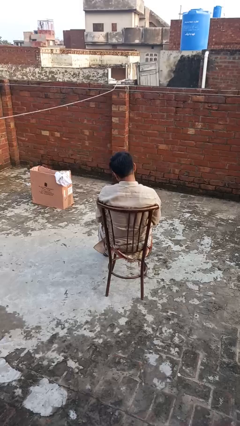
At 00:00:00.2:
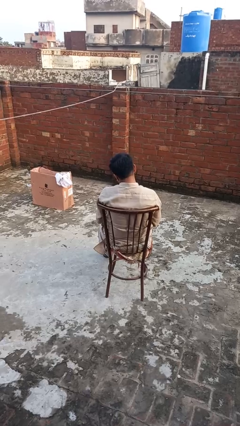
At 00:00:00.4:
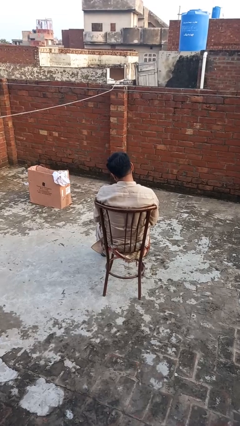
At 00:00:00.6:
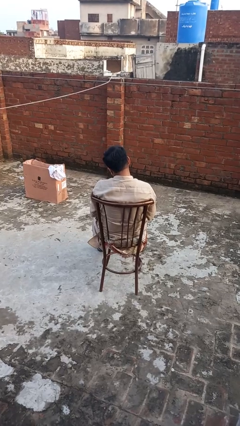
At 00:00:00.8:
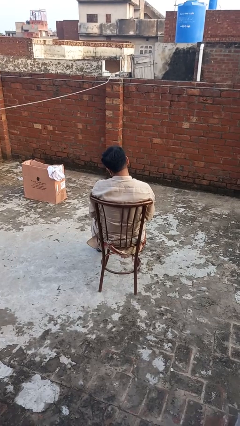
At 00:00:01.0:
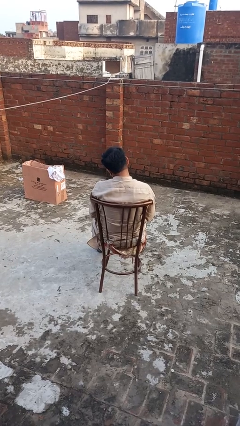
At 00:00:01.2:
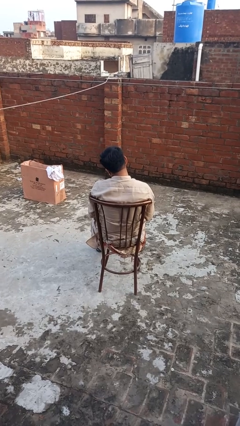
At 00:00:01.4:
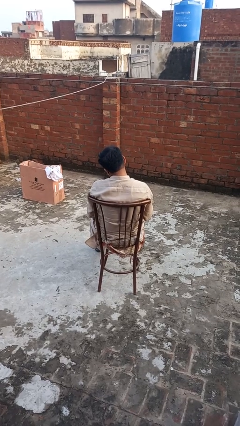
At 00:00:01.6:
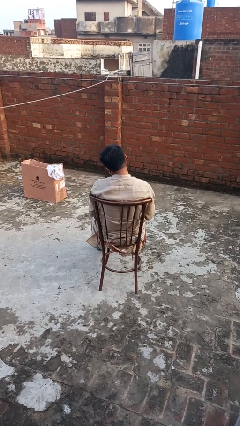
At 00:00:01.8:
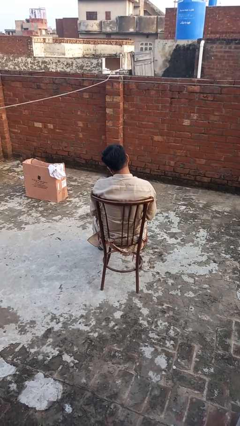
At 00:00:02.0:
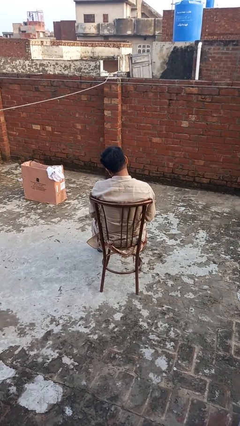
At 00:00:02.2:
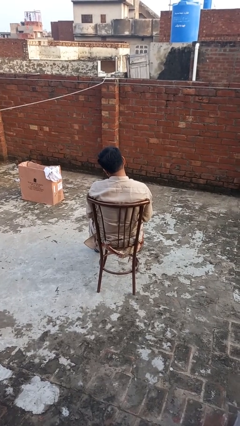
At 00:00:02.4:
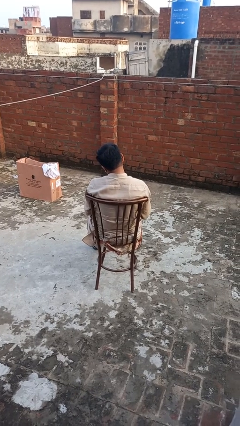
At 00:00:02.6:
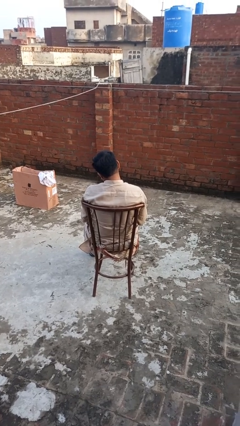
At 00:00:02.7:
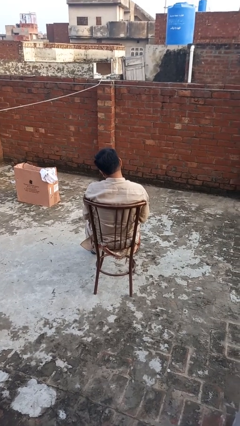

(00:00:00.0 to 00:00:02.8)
person stirs mug

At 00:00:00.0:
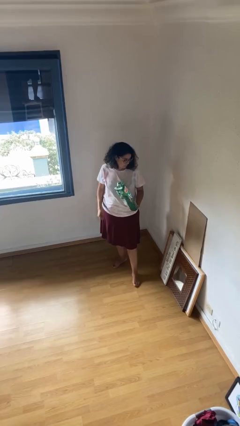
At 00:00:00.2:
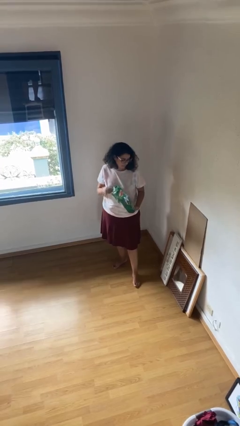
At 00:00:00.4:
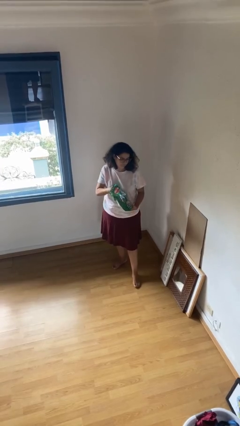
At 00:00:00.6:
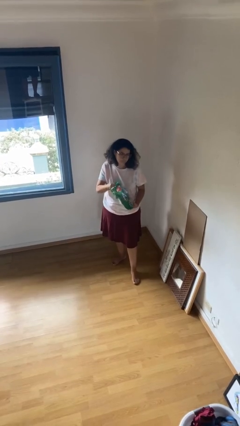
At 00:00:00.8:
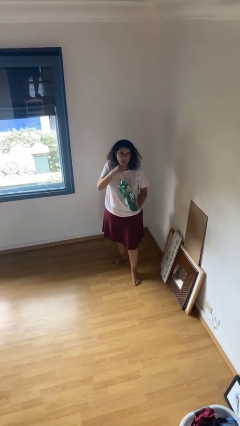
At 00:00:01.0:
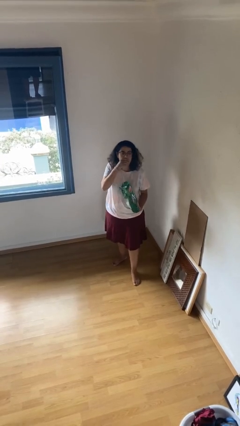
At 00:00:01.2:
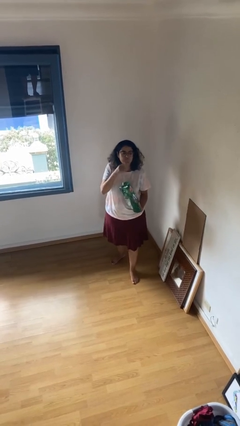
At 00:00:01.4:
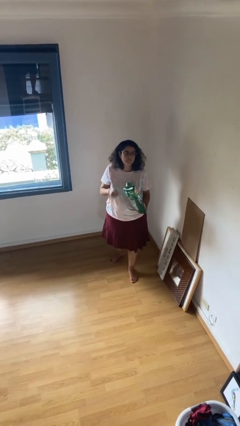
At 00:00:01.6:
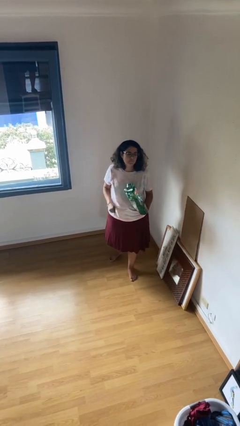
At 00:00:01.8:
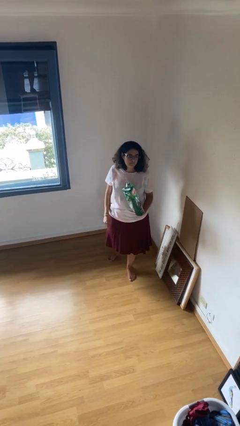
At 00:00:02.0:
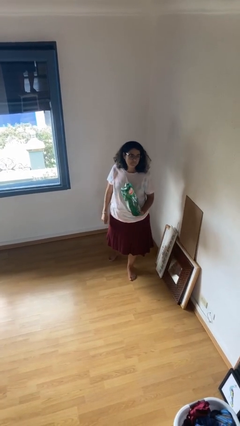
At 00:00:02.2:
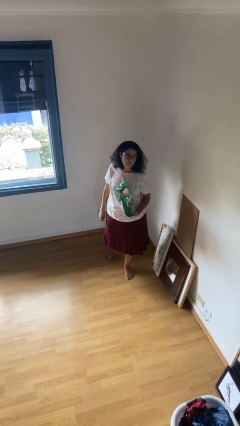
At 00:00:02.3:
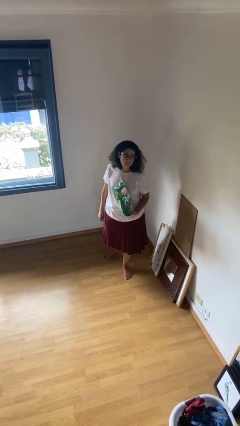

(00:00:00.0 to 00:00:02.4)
person eats snack from bag

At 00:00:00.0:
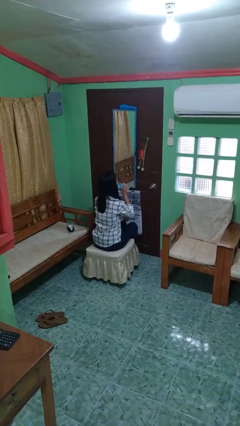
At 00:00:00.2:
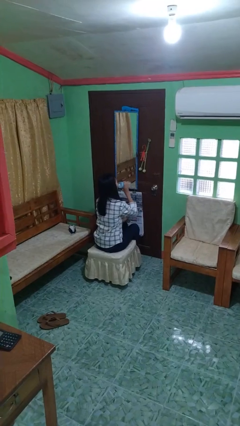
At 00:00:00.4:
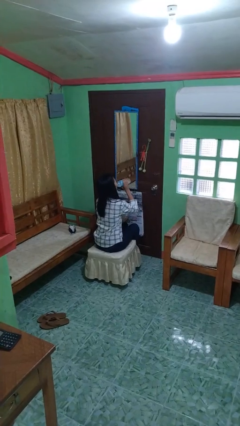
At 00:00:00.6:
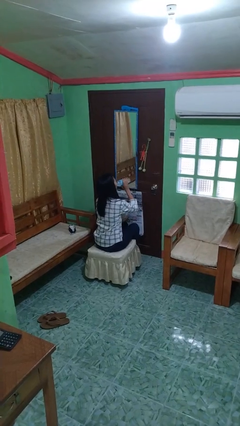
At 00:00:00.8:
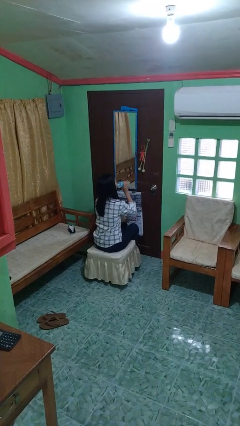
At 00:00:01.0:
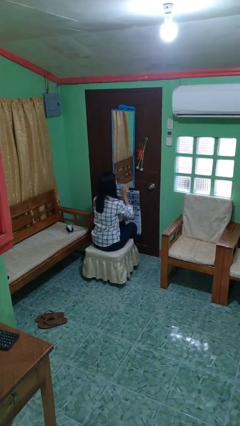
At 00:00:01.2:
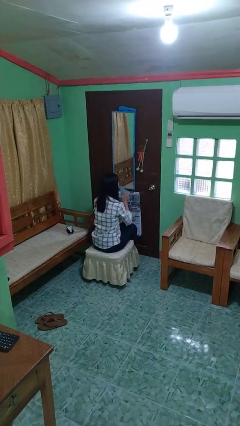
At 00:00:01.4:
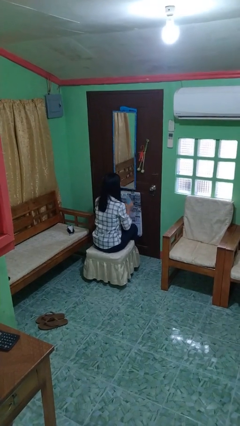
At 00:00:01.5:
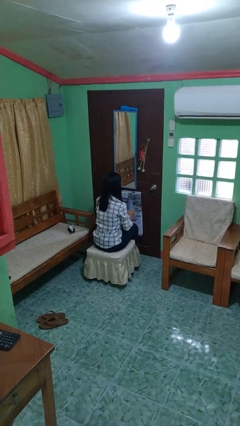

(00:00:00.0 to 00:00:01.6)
person drinks from bottle

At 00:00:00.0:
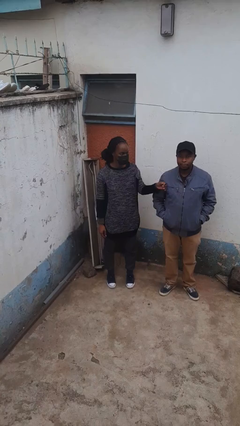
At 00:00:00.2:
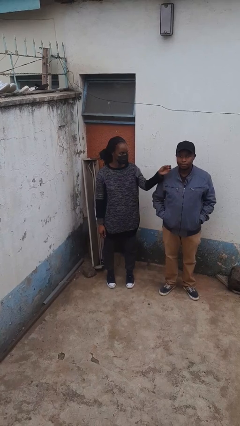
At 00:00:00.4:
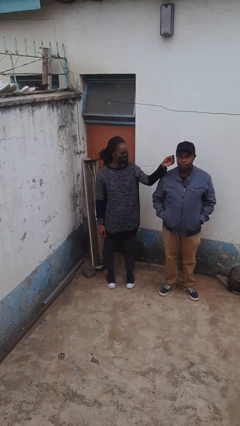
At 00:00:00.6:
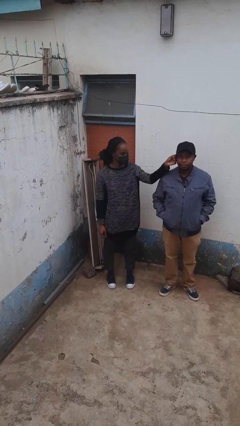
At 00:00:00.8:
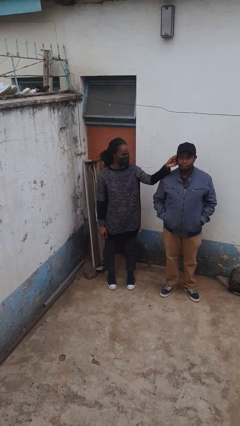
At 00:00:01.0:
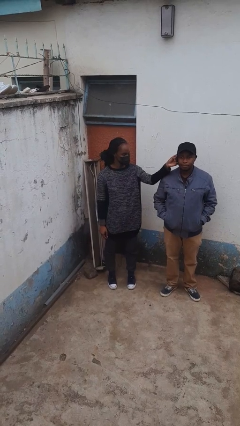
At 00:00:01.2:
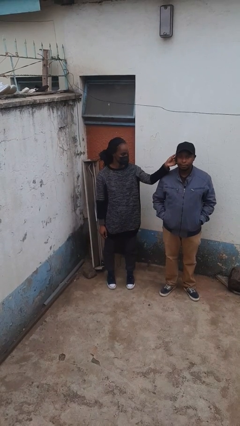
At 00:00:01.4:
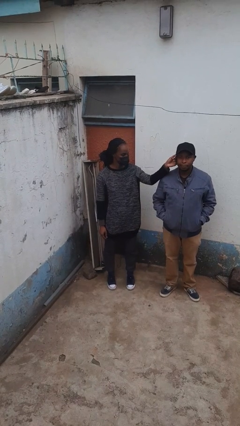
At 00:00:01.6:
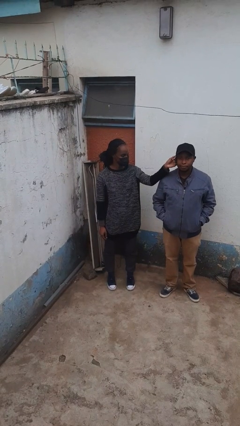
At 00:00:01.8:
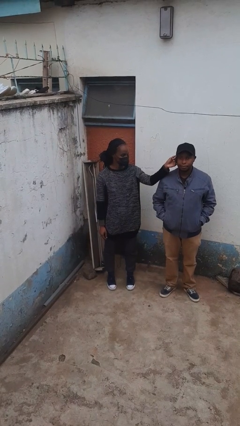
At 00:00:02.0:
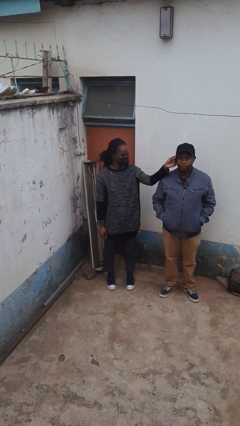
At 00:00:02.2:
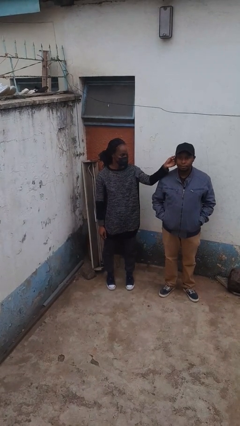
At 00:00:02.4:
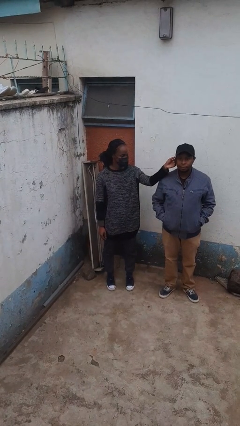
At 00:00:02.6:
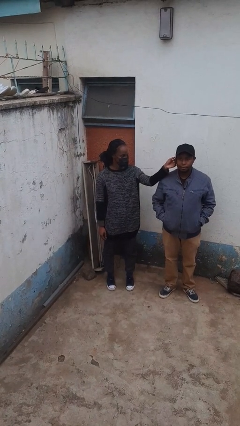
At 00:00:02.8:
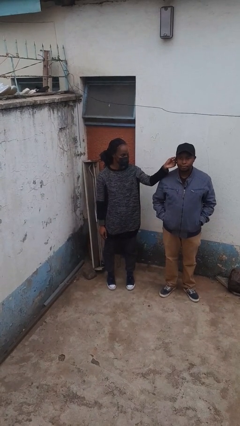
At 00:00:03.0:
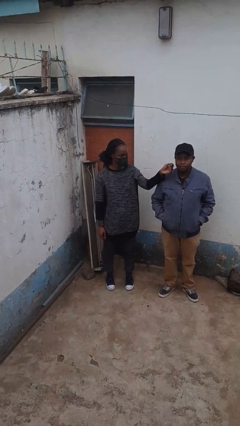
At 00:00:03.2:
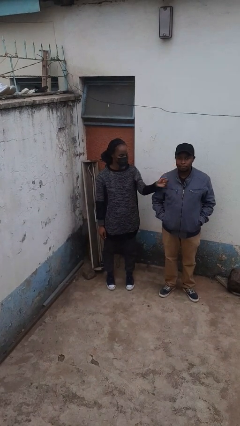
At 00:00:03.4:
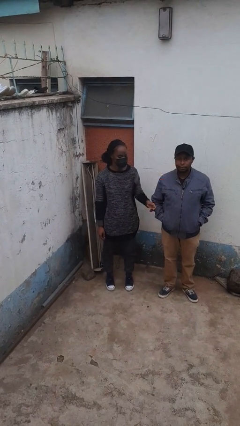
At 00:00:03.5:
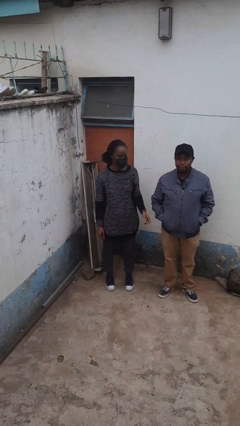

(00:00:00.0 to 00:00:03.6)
person touches face of person

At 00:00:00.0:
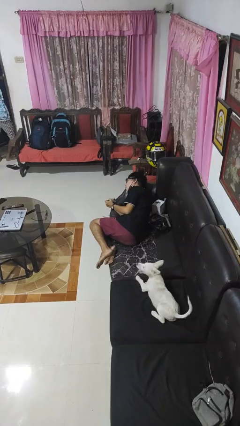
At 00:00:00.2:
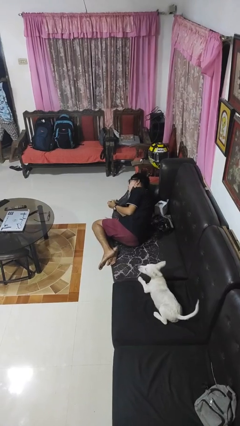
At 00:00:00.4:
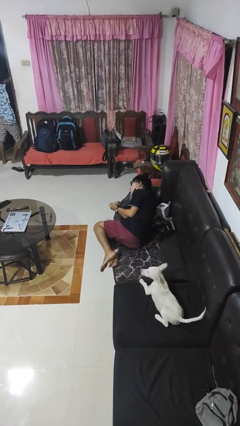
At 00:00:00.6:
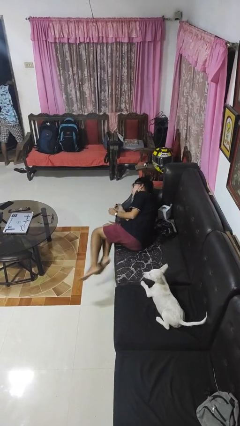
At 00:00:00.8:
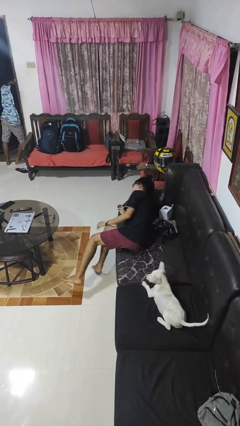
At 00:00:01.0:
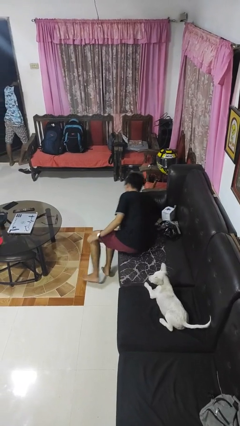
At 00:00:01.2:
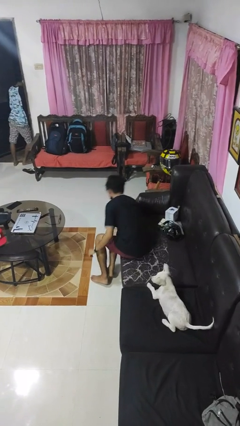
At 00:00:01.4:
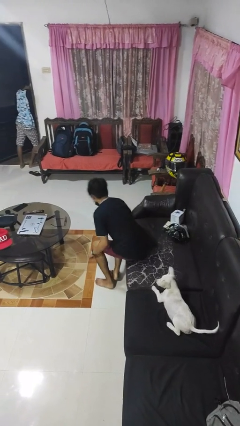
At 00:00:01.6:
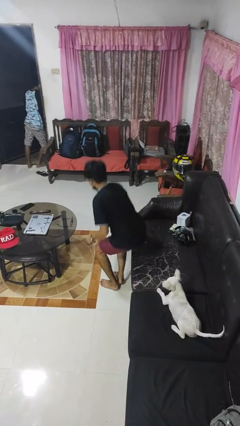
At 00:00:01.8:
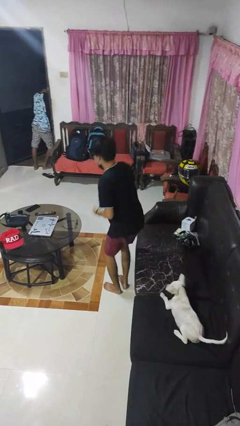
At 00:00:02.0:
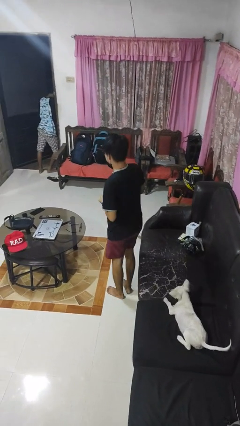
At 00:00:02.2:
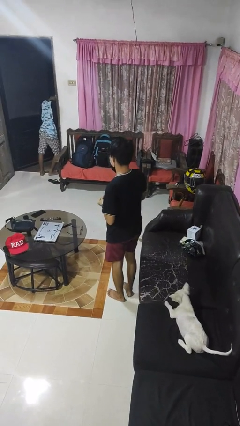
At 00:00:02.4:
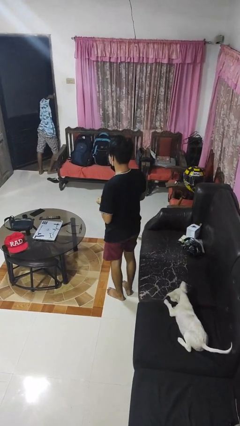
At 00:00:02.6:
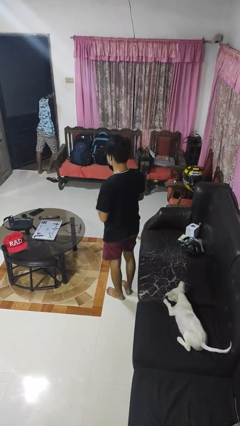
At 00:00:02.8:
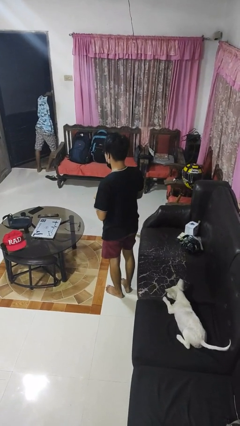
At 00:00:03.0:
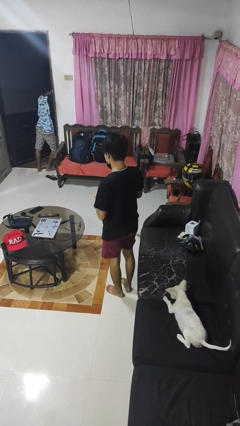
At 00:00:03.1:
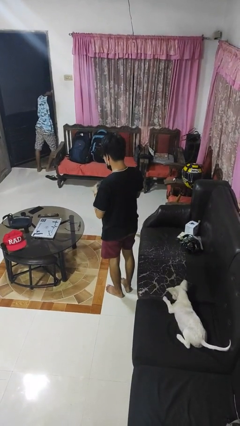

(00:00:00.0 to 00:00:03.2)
person stands up

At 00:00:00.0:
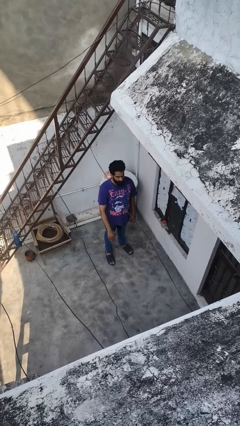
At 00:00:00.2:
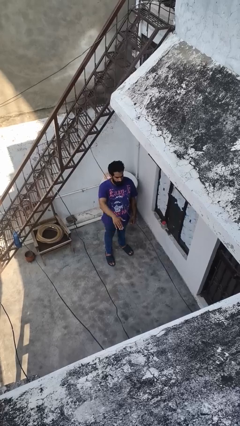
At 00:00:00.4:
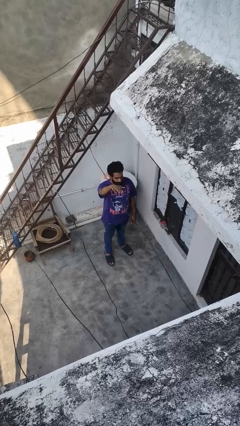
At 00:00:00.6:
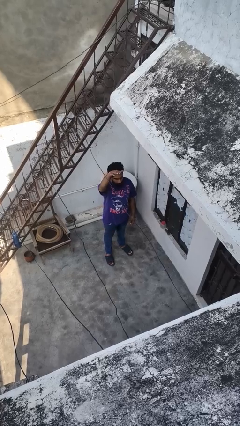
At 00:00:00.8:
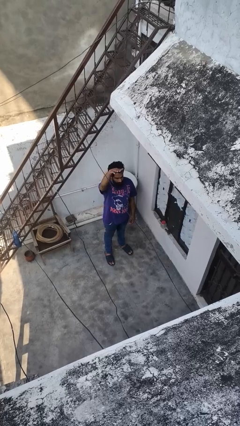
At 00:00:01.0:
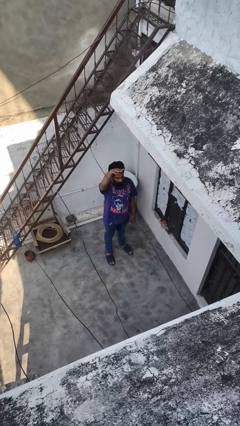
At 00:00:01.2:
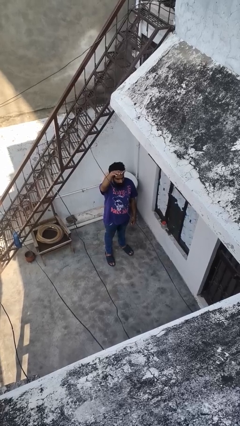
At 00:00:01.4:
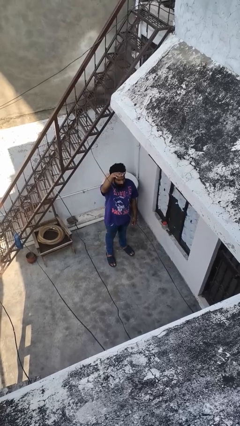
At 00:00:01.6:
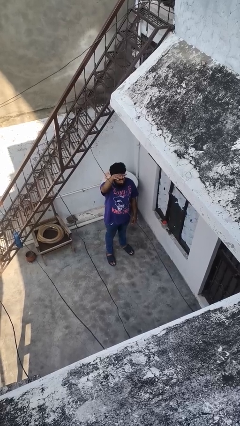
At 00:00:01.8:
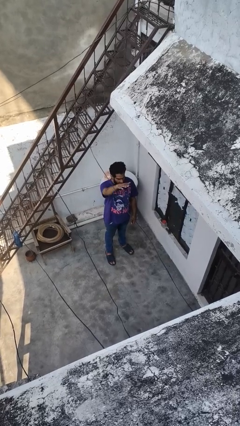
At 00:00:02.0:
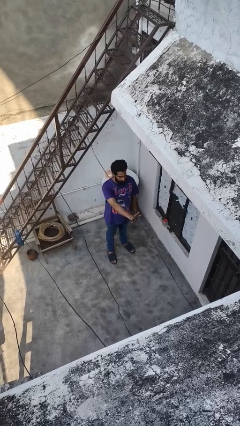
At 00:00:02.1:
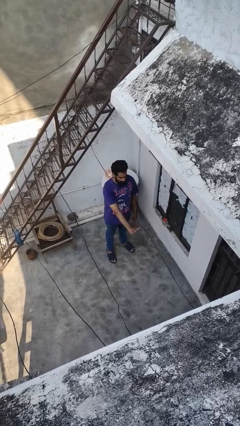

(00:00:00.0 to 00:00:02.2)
person gestures swipe up

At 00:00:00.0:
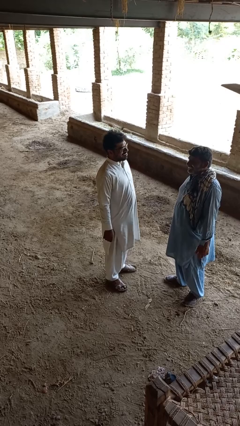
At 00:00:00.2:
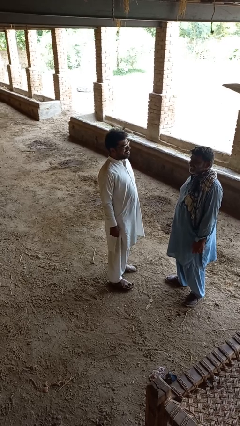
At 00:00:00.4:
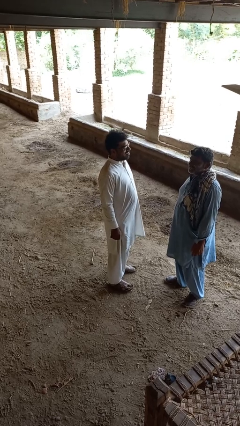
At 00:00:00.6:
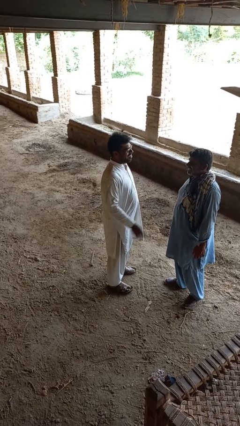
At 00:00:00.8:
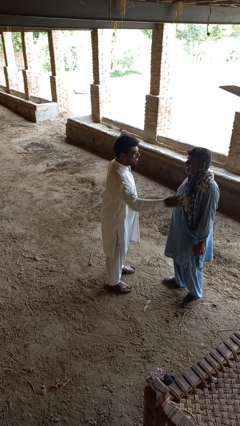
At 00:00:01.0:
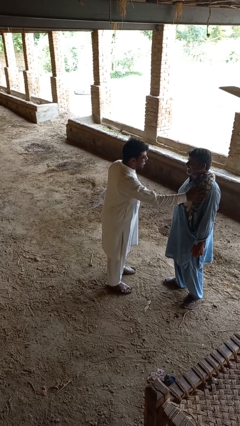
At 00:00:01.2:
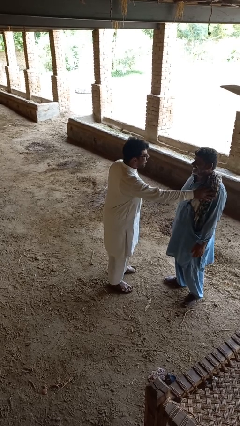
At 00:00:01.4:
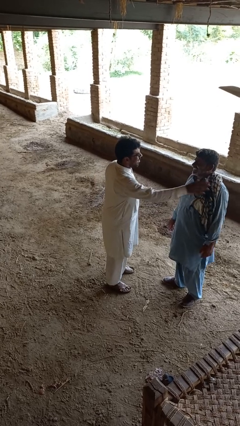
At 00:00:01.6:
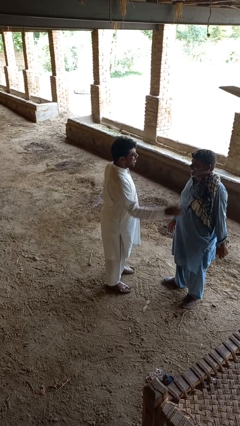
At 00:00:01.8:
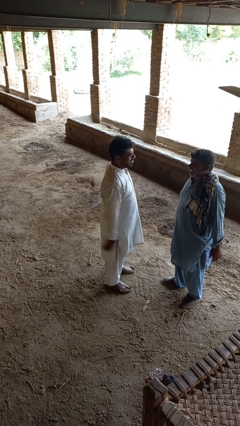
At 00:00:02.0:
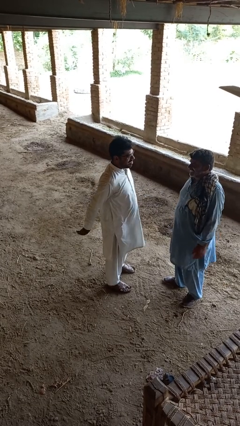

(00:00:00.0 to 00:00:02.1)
person shoves person
